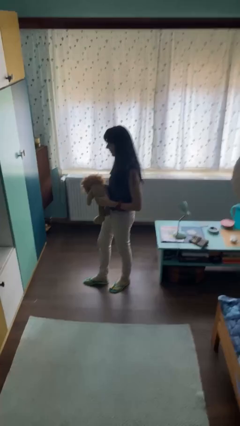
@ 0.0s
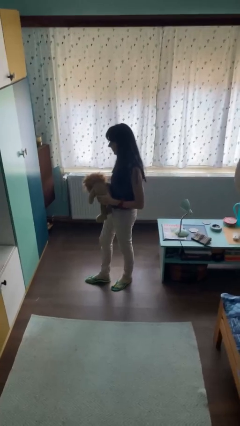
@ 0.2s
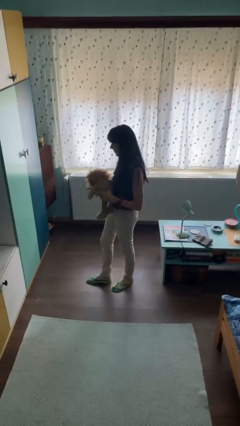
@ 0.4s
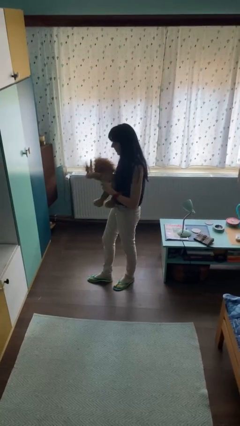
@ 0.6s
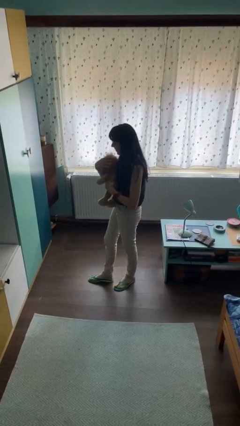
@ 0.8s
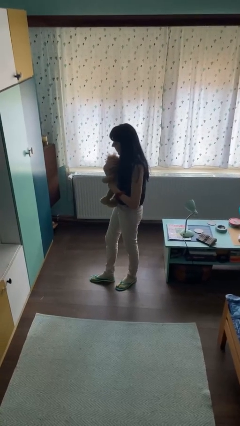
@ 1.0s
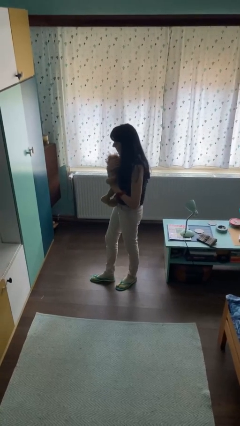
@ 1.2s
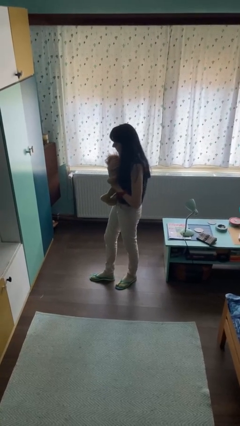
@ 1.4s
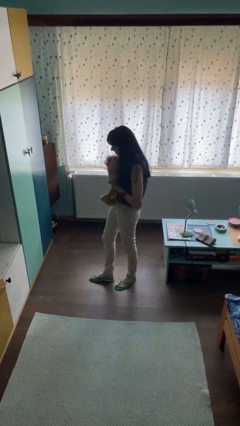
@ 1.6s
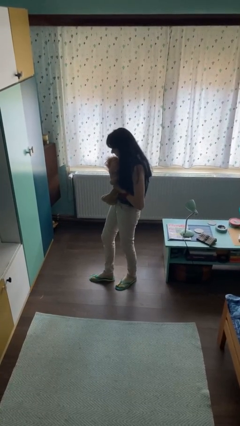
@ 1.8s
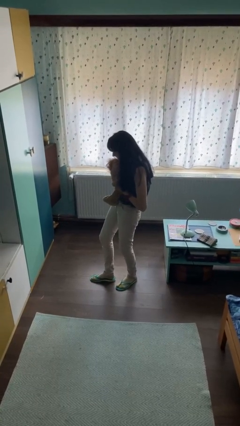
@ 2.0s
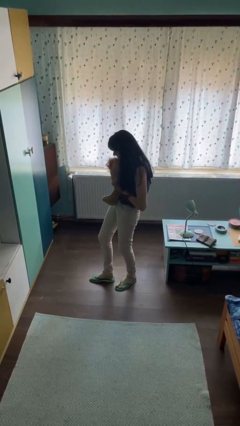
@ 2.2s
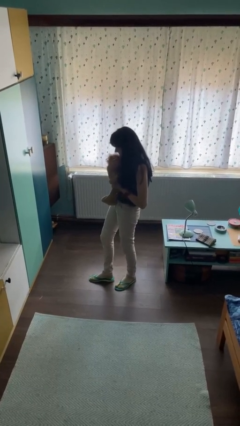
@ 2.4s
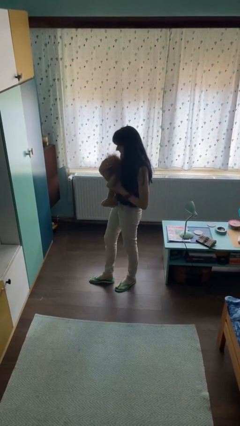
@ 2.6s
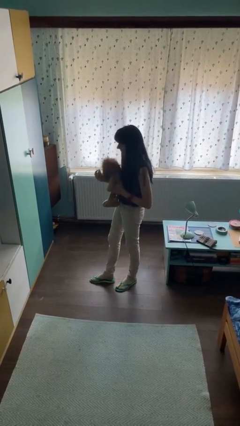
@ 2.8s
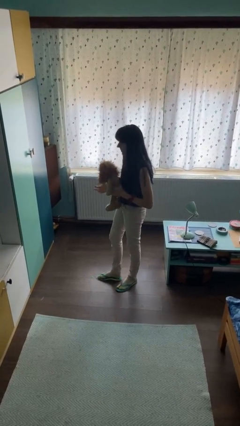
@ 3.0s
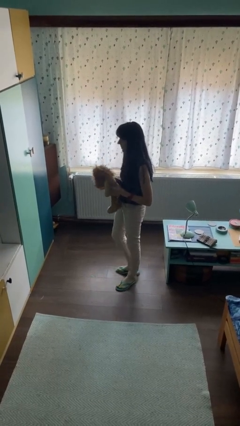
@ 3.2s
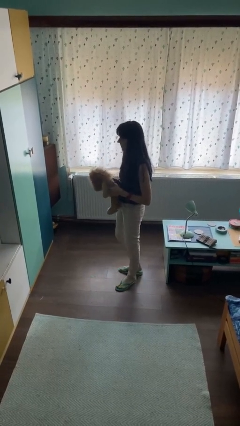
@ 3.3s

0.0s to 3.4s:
person squeezes object

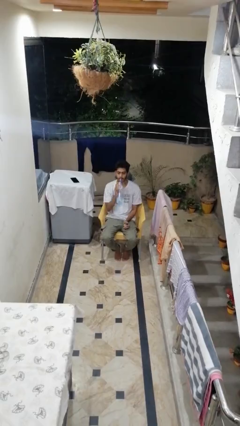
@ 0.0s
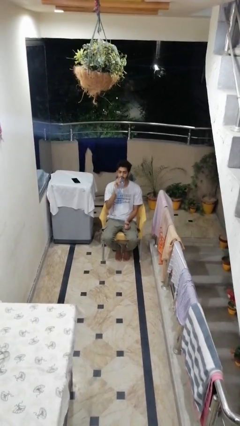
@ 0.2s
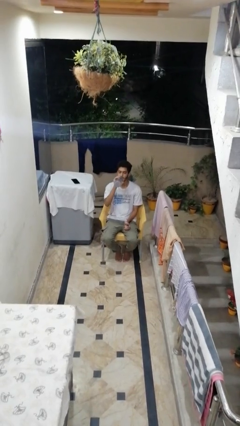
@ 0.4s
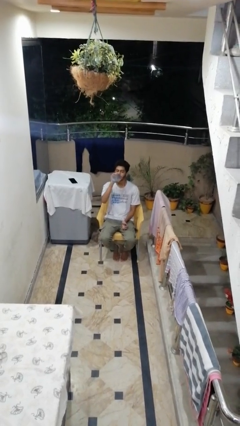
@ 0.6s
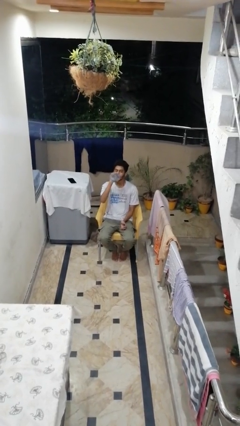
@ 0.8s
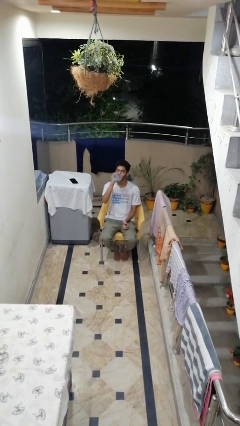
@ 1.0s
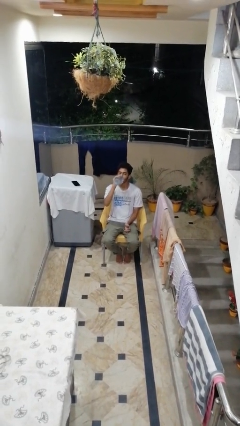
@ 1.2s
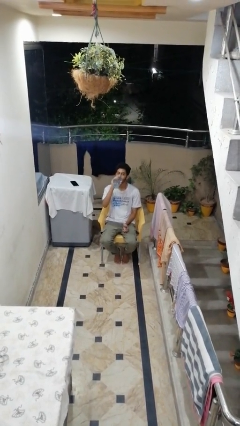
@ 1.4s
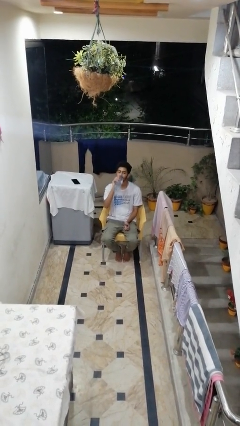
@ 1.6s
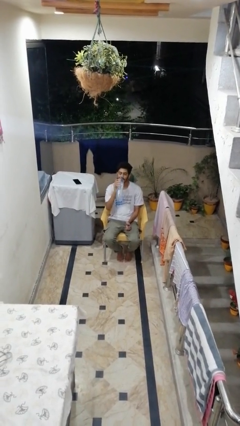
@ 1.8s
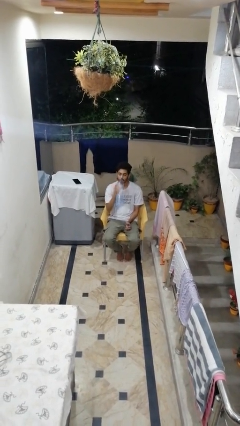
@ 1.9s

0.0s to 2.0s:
person drinks from bottle

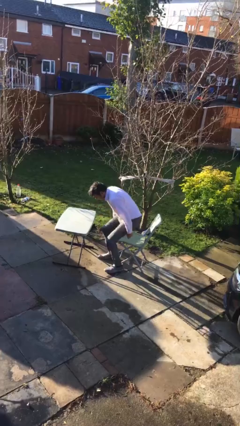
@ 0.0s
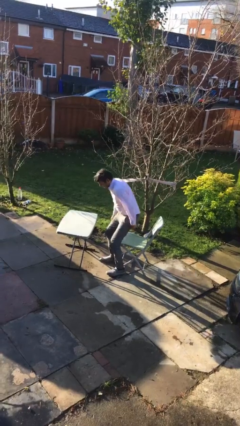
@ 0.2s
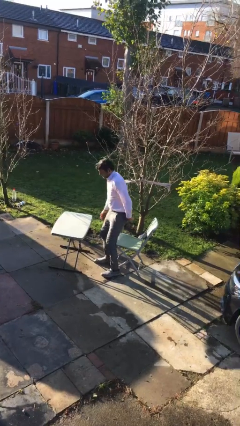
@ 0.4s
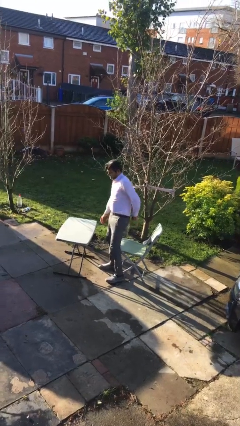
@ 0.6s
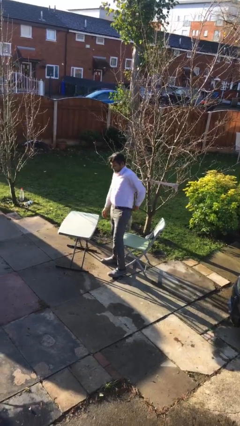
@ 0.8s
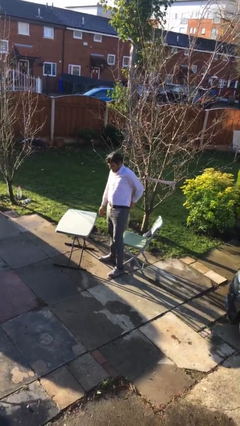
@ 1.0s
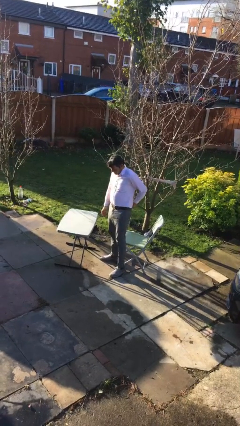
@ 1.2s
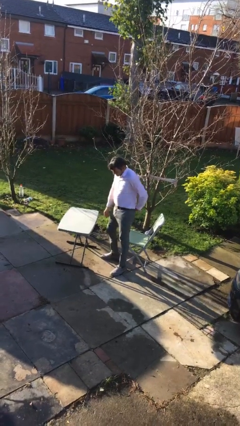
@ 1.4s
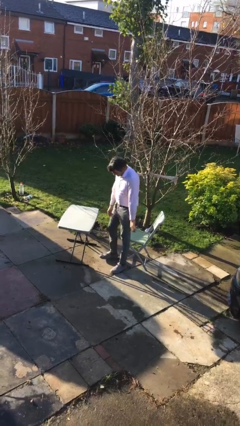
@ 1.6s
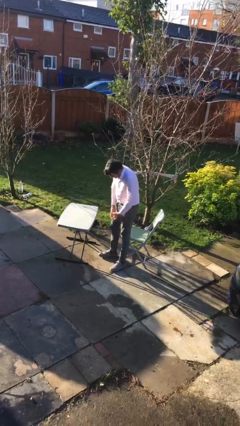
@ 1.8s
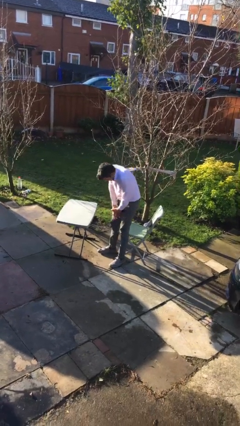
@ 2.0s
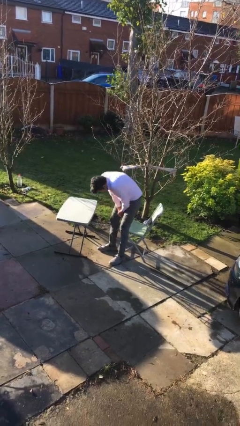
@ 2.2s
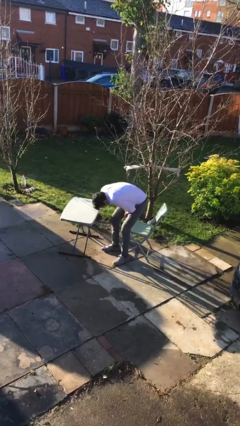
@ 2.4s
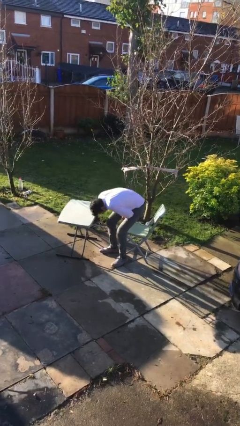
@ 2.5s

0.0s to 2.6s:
person stands up

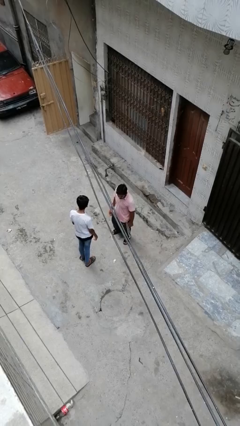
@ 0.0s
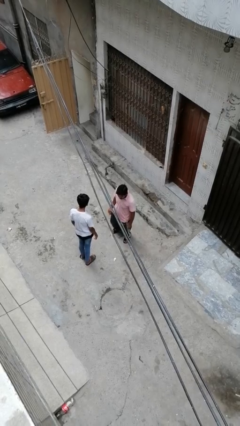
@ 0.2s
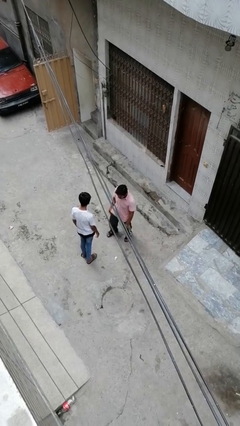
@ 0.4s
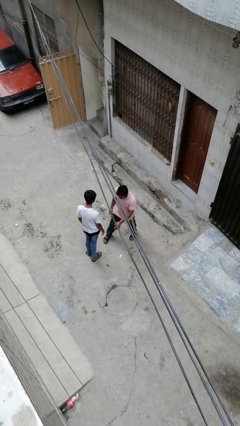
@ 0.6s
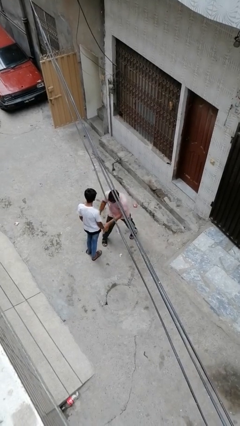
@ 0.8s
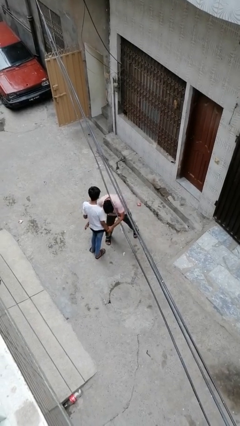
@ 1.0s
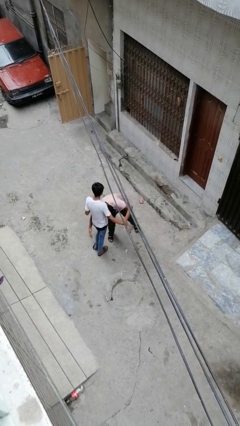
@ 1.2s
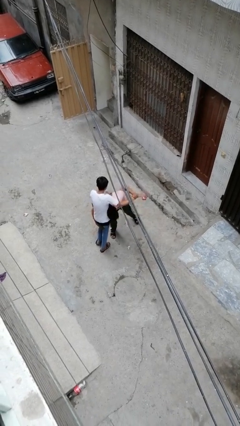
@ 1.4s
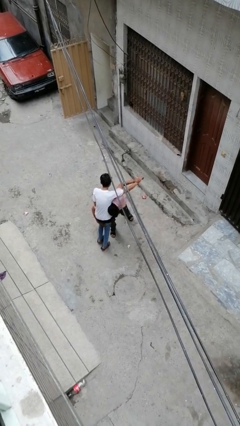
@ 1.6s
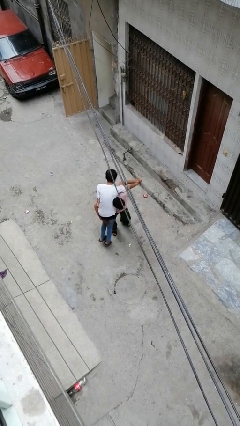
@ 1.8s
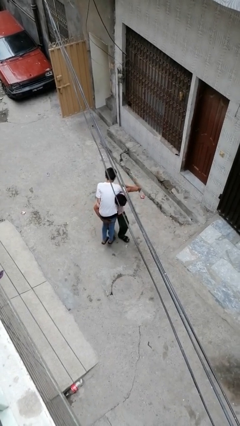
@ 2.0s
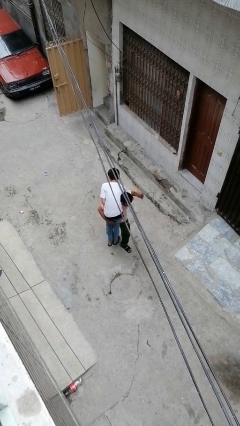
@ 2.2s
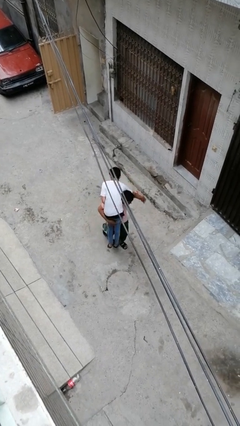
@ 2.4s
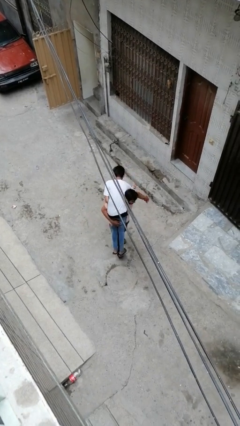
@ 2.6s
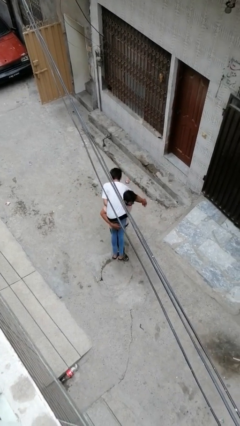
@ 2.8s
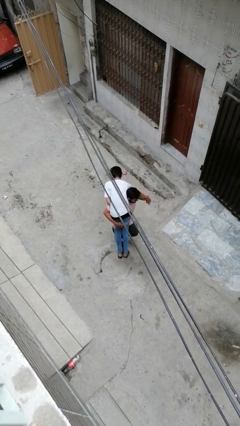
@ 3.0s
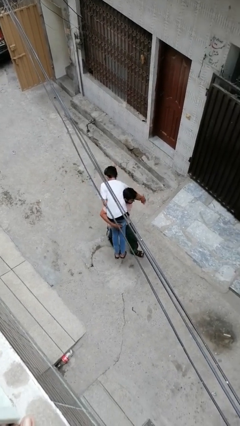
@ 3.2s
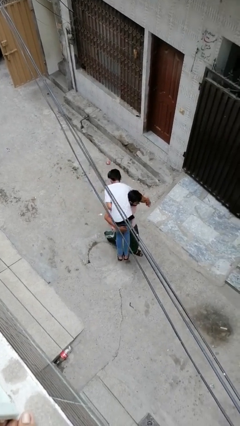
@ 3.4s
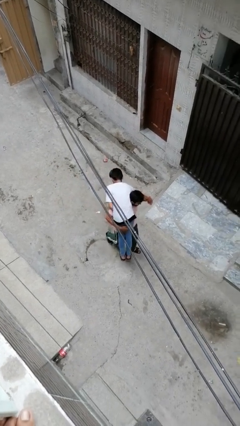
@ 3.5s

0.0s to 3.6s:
person carries person over shoulder

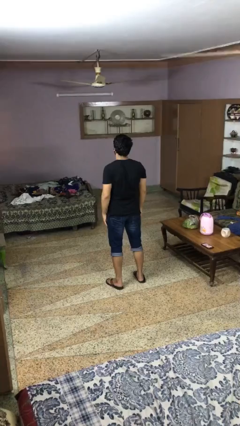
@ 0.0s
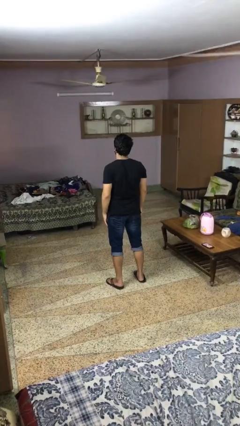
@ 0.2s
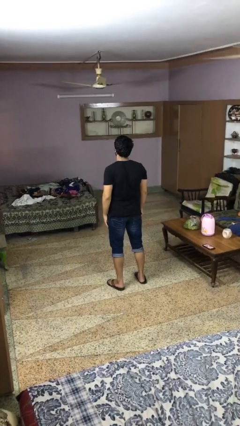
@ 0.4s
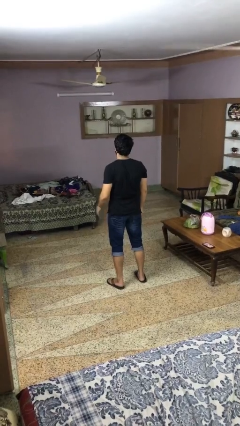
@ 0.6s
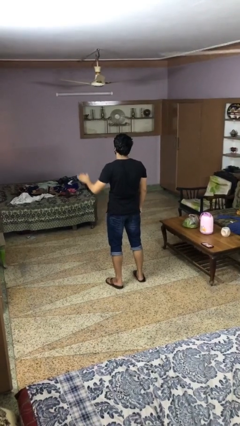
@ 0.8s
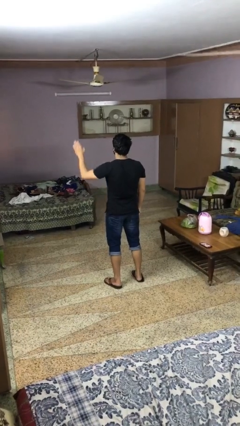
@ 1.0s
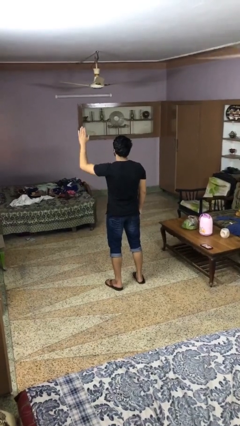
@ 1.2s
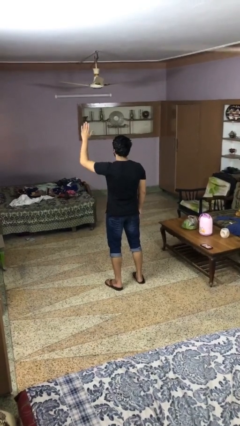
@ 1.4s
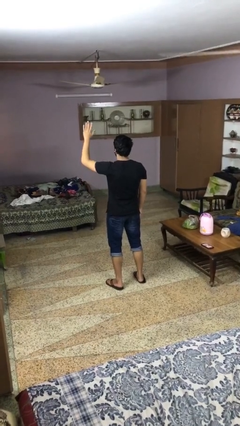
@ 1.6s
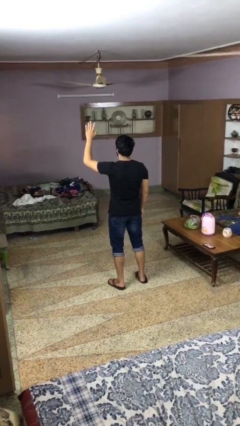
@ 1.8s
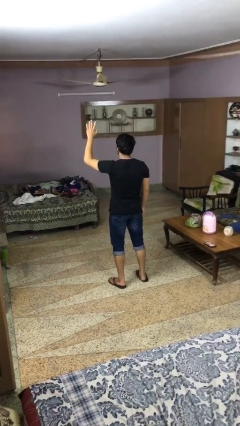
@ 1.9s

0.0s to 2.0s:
person gestures raise hand

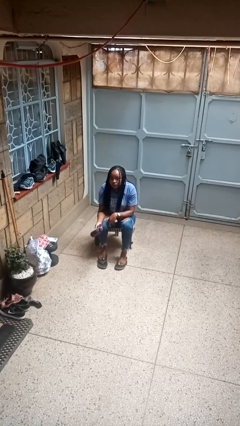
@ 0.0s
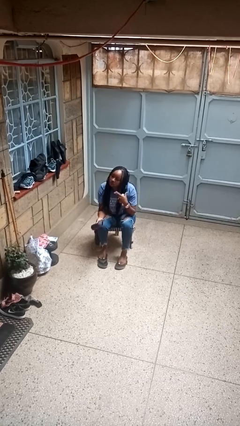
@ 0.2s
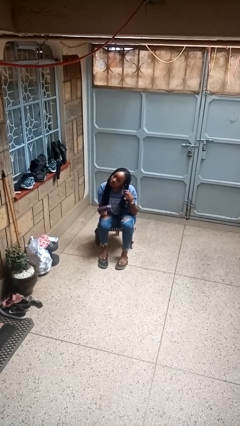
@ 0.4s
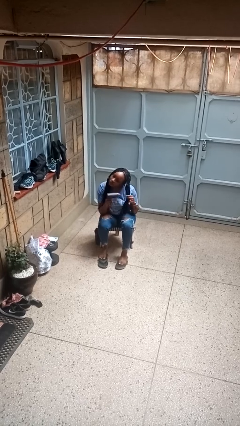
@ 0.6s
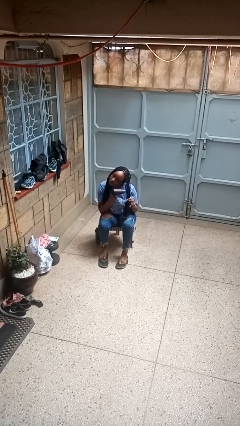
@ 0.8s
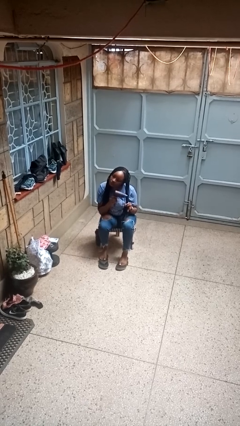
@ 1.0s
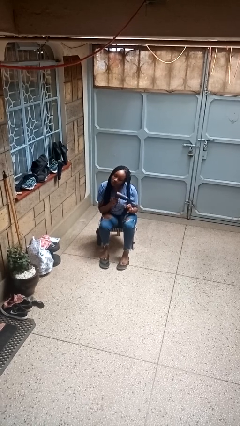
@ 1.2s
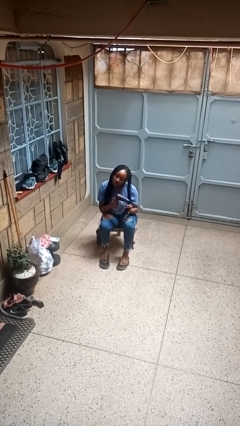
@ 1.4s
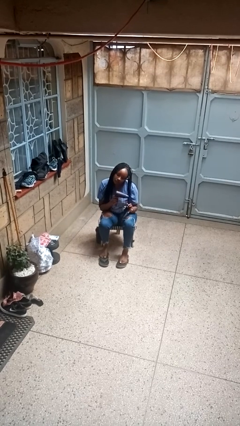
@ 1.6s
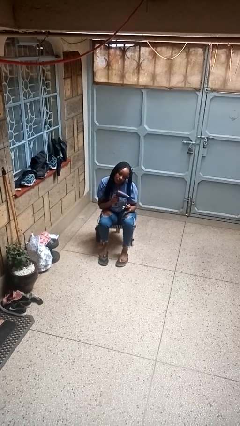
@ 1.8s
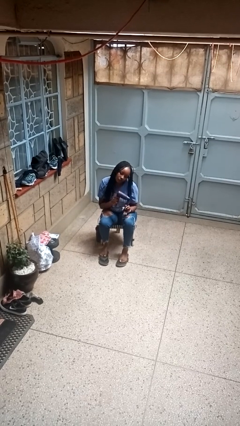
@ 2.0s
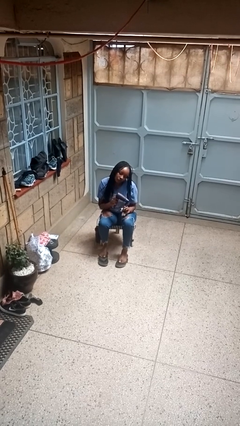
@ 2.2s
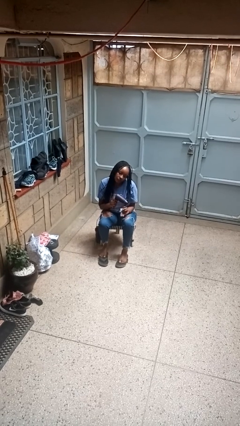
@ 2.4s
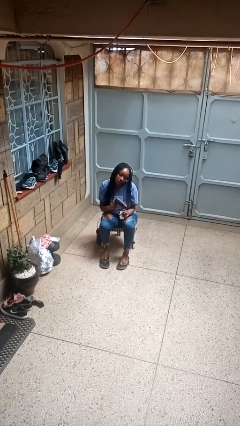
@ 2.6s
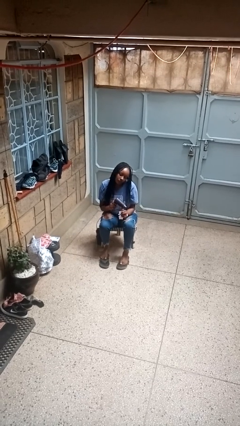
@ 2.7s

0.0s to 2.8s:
person dries hair with hairdryer

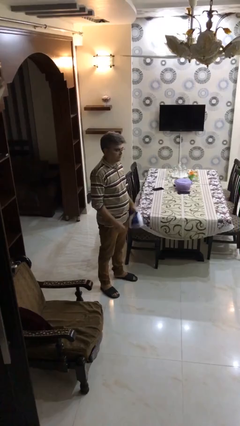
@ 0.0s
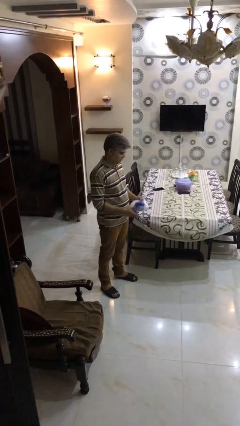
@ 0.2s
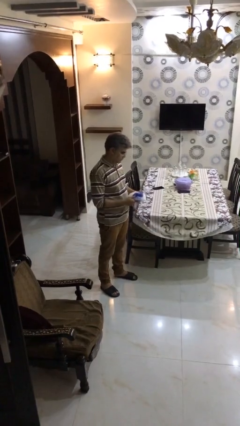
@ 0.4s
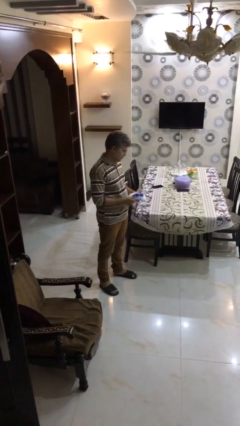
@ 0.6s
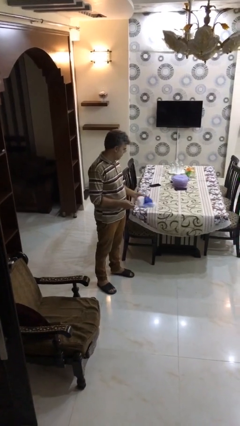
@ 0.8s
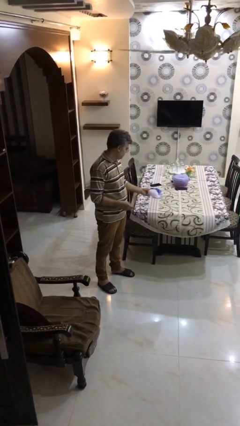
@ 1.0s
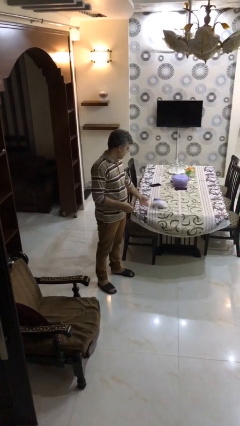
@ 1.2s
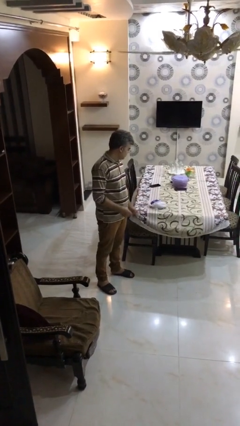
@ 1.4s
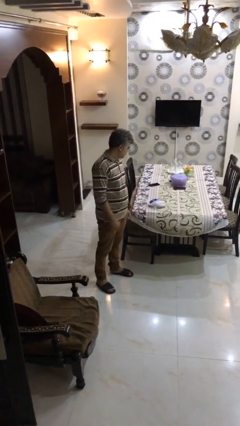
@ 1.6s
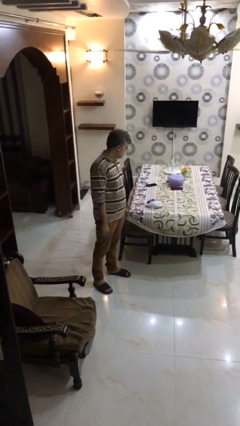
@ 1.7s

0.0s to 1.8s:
person puts down object on table
